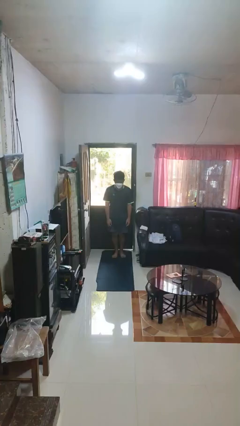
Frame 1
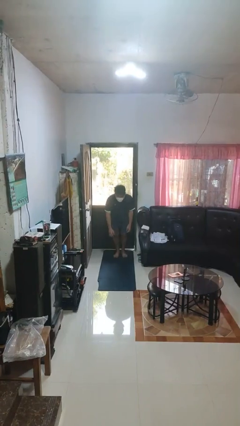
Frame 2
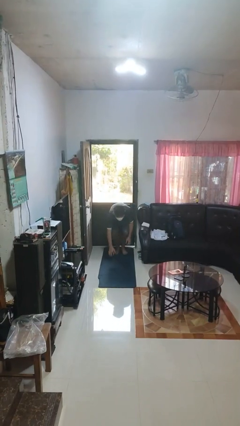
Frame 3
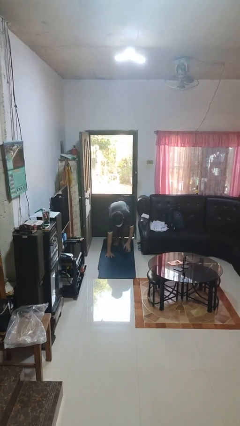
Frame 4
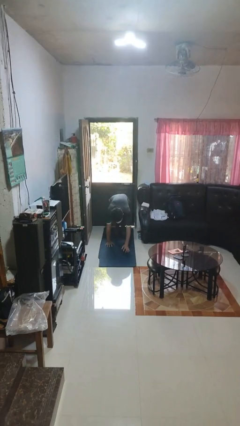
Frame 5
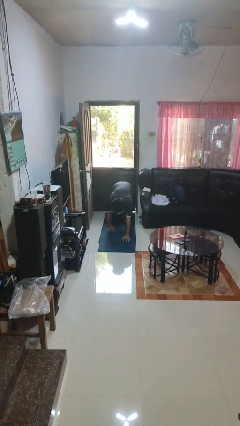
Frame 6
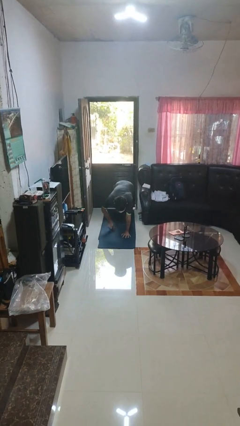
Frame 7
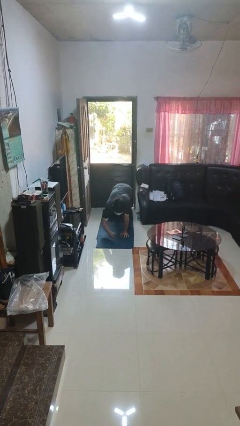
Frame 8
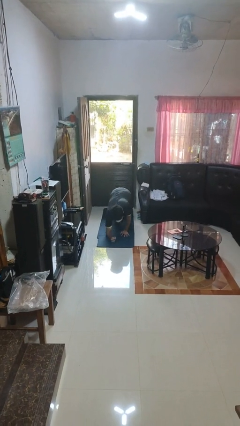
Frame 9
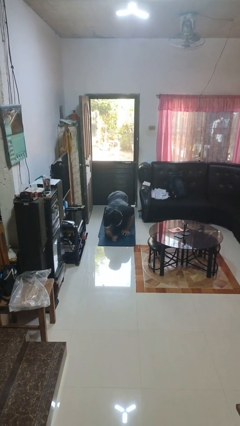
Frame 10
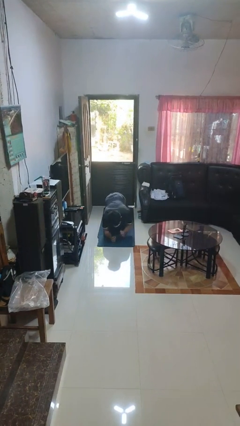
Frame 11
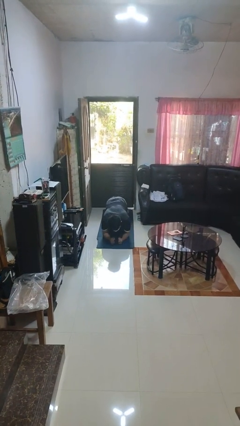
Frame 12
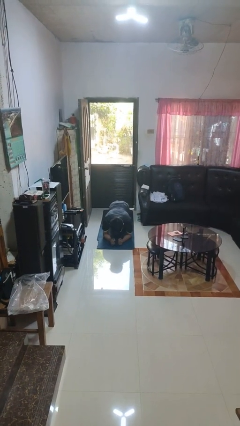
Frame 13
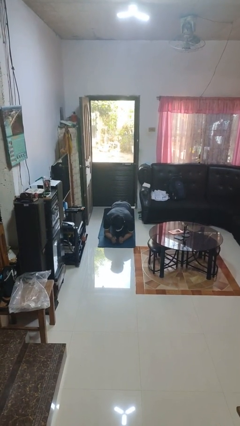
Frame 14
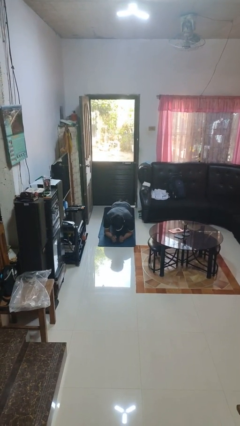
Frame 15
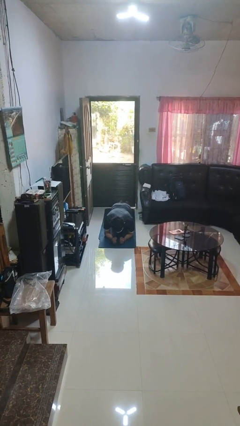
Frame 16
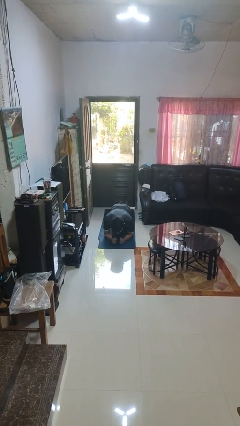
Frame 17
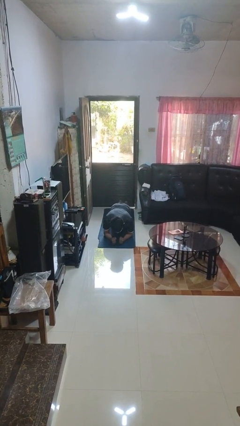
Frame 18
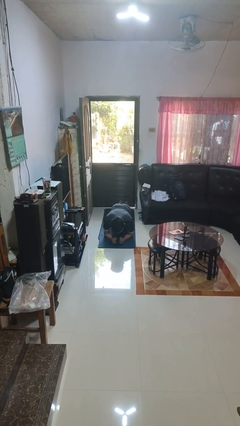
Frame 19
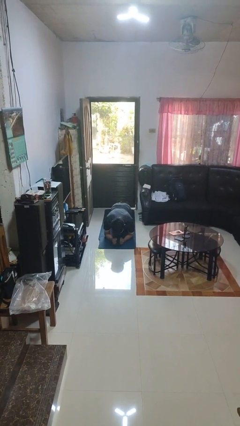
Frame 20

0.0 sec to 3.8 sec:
person exercises with plank

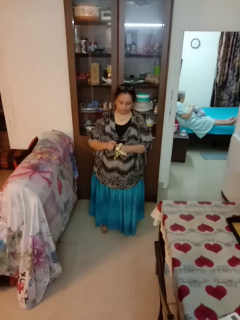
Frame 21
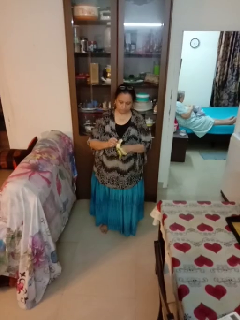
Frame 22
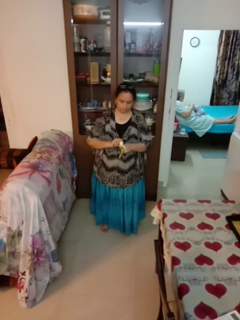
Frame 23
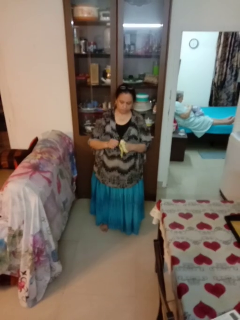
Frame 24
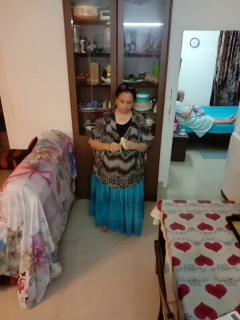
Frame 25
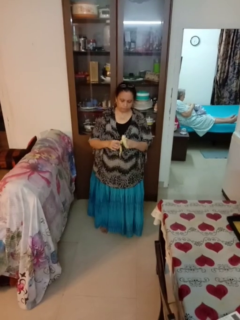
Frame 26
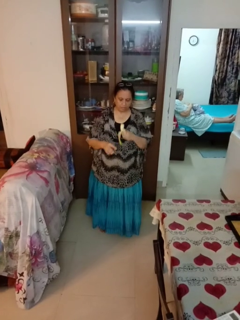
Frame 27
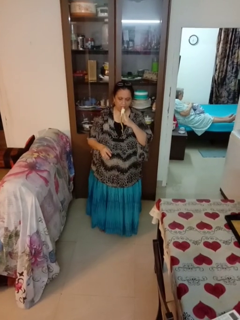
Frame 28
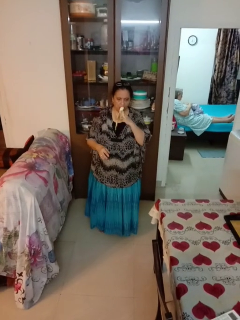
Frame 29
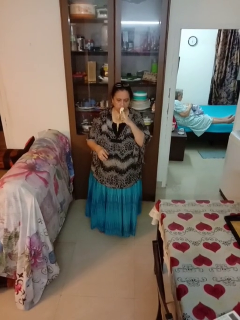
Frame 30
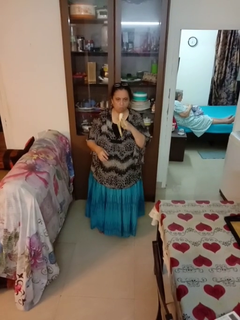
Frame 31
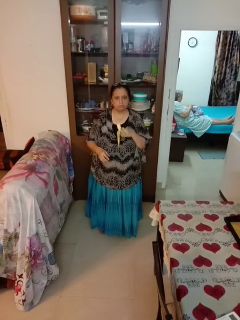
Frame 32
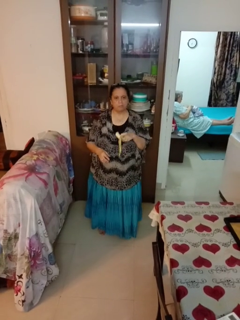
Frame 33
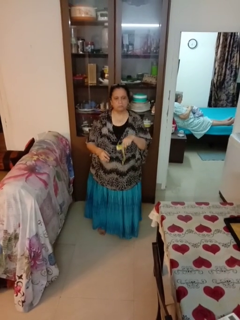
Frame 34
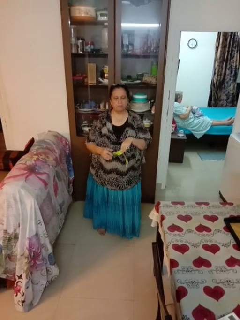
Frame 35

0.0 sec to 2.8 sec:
person eats banana

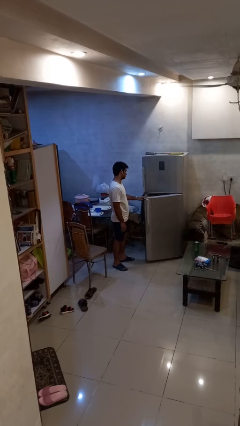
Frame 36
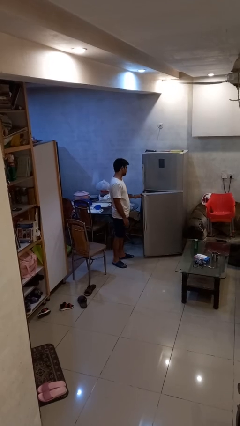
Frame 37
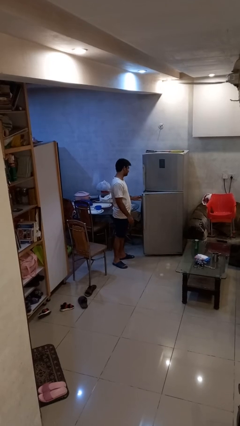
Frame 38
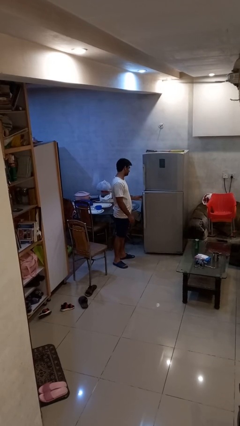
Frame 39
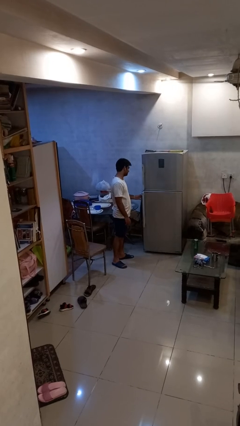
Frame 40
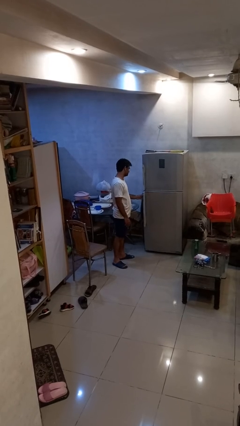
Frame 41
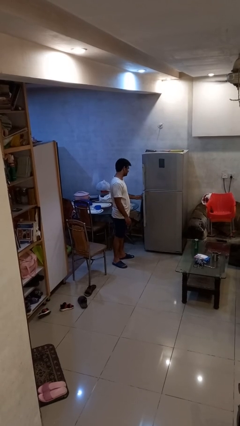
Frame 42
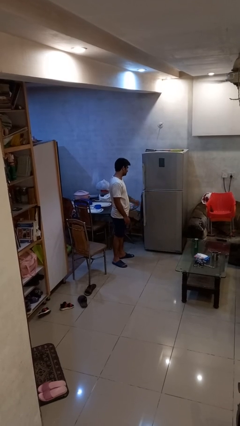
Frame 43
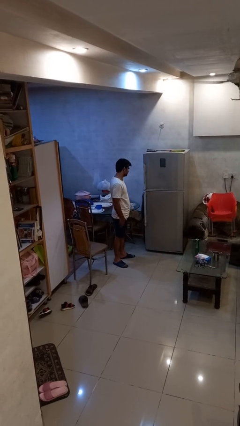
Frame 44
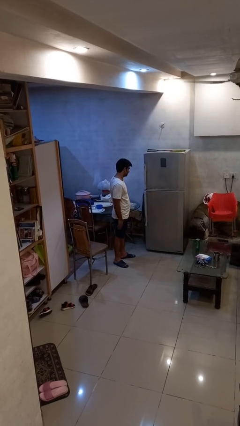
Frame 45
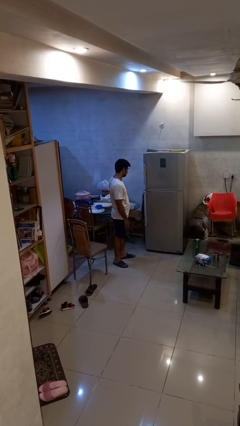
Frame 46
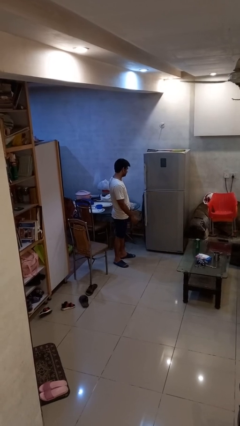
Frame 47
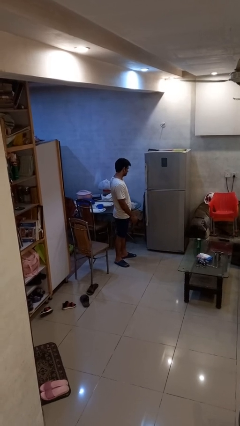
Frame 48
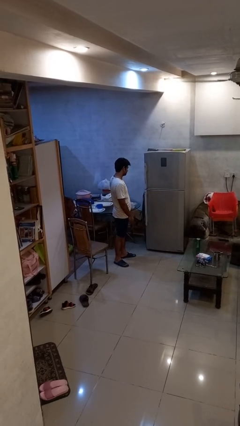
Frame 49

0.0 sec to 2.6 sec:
person closes refrigerator

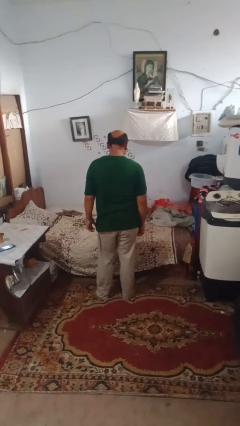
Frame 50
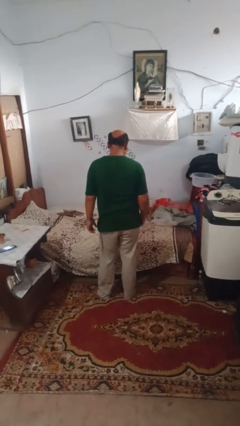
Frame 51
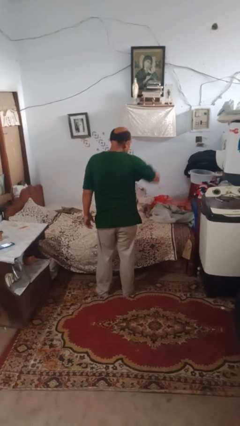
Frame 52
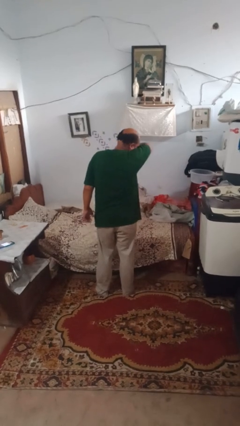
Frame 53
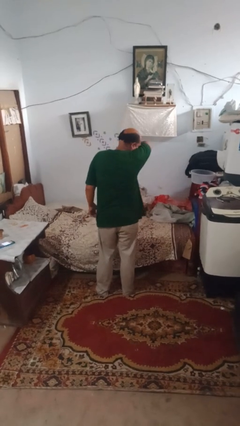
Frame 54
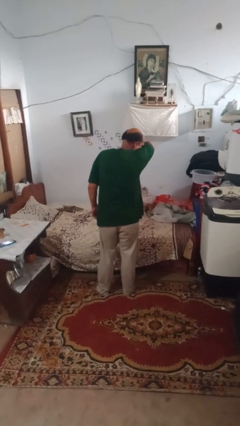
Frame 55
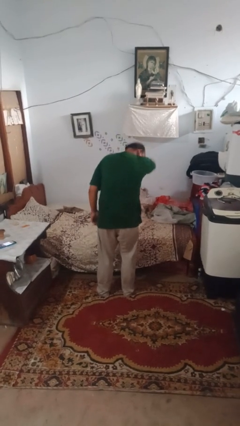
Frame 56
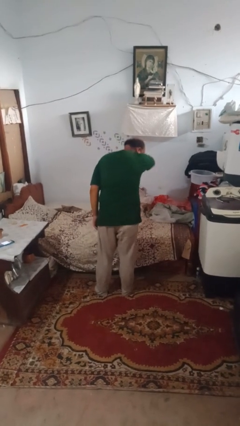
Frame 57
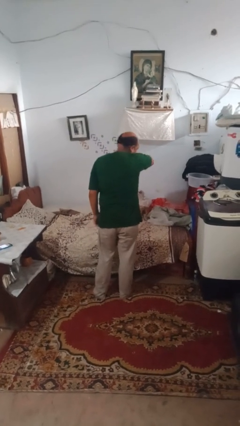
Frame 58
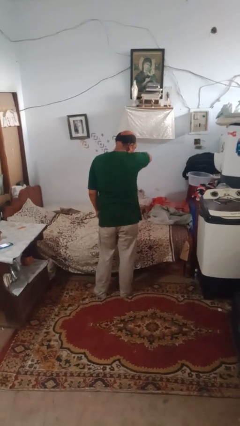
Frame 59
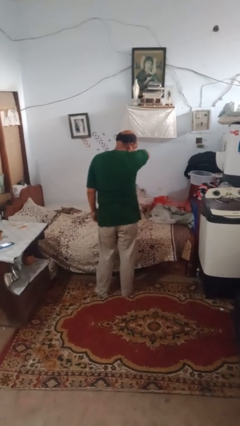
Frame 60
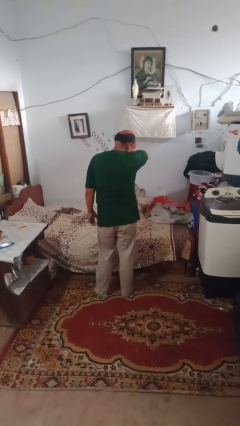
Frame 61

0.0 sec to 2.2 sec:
person sneezes into arm

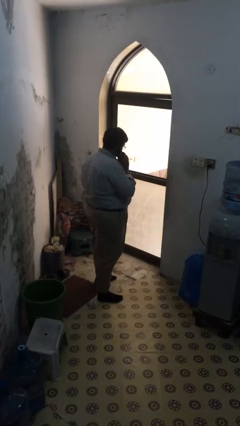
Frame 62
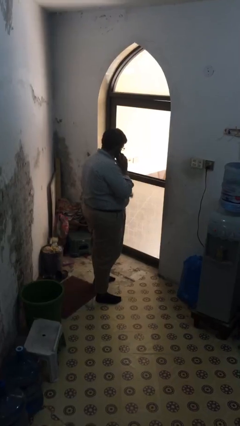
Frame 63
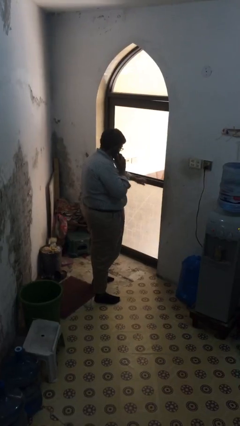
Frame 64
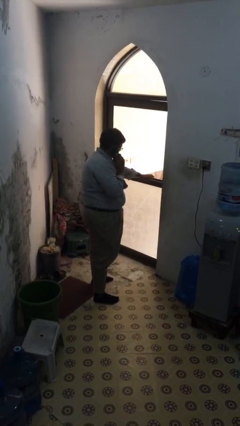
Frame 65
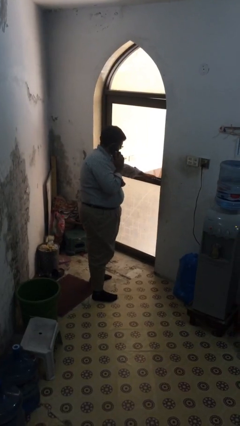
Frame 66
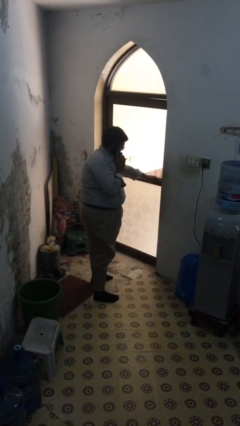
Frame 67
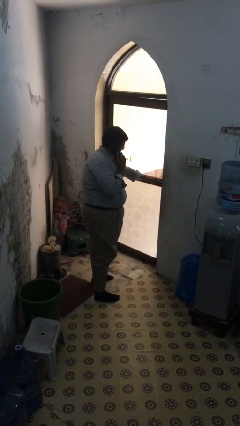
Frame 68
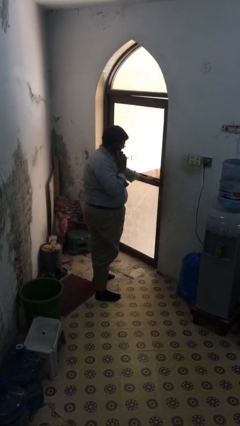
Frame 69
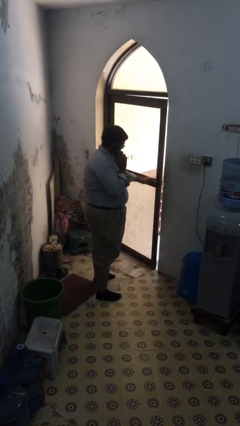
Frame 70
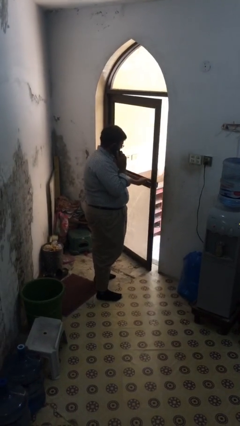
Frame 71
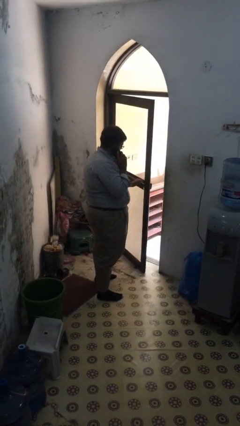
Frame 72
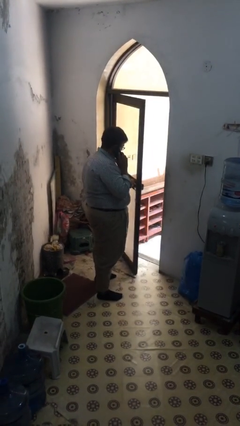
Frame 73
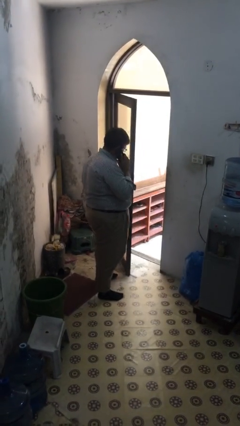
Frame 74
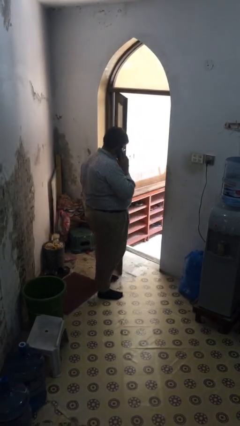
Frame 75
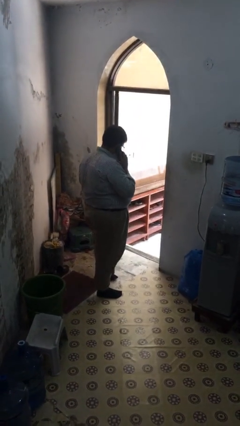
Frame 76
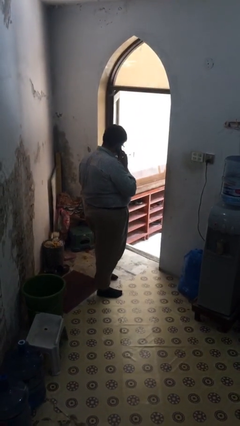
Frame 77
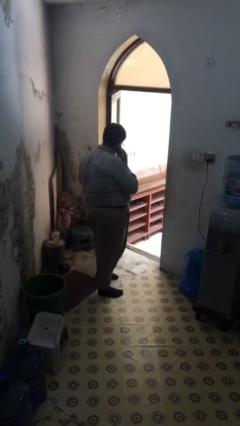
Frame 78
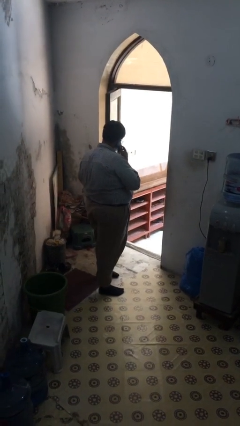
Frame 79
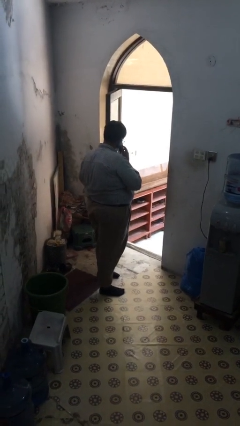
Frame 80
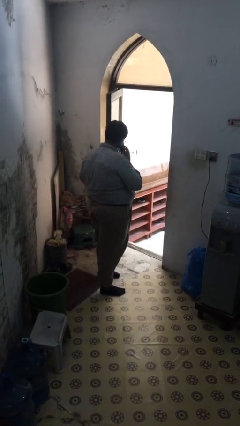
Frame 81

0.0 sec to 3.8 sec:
person opens facility door

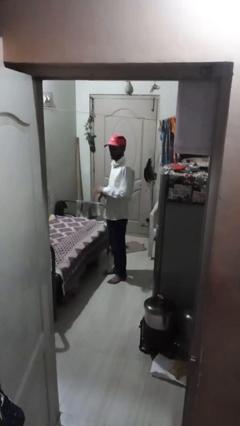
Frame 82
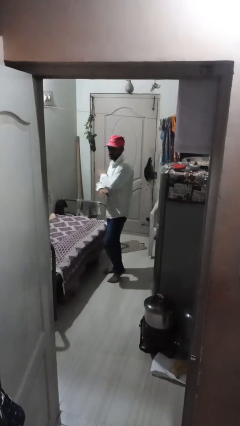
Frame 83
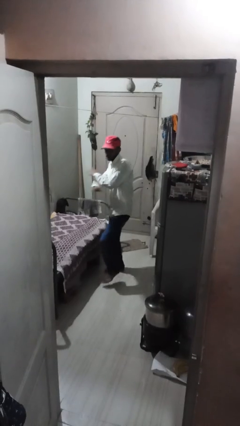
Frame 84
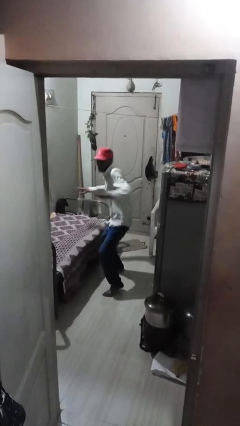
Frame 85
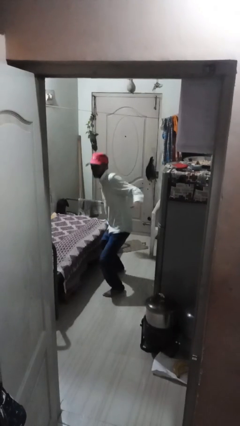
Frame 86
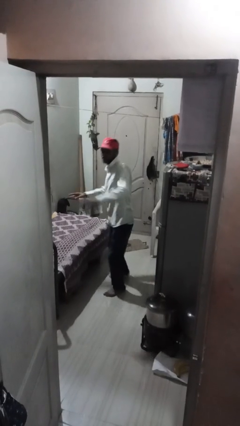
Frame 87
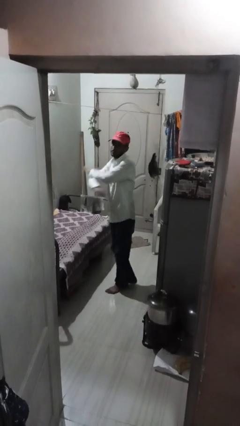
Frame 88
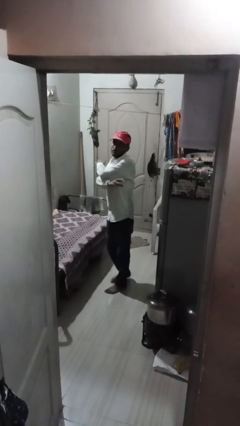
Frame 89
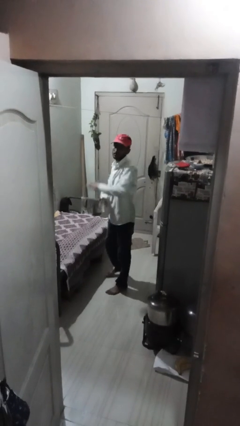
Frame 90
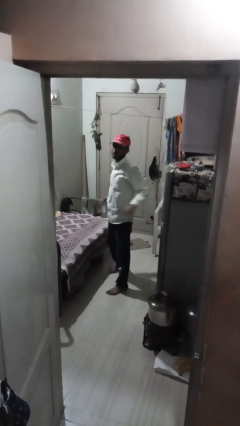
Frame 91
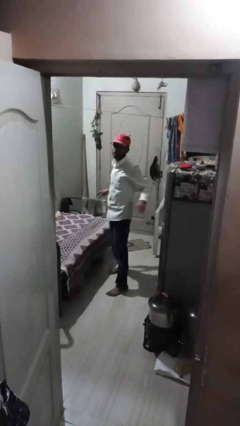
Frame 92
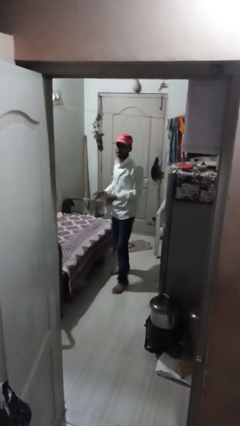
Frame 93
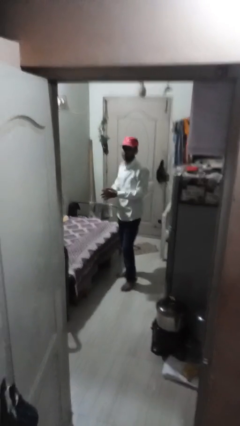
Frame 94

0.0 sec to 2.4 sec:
person karate chop

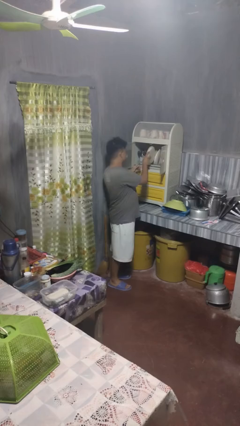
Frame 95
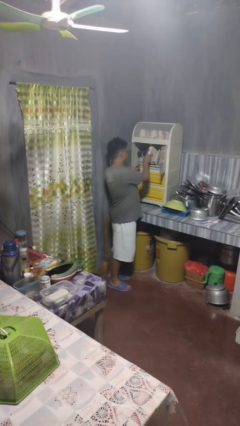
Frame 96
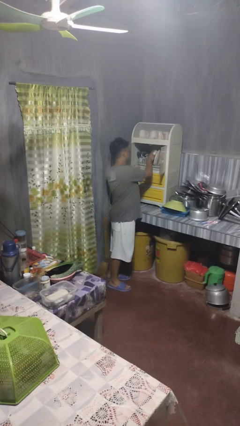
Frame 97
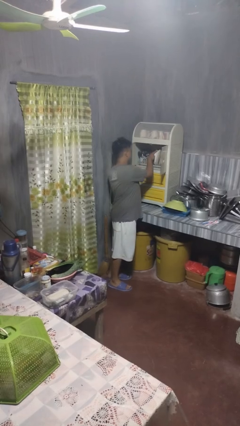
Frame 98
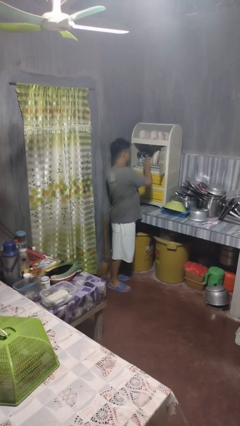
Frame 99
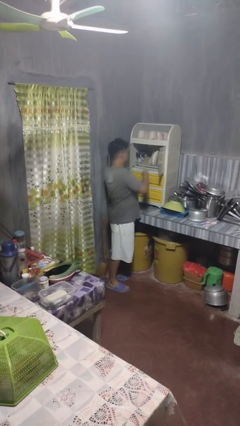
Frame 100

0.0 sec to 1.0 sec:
person puts object in cabinet
